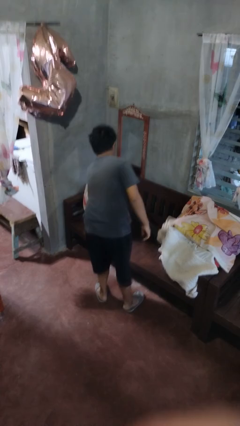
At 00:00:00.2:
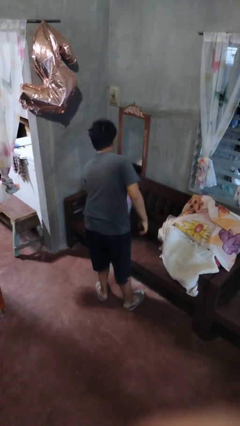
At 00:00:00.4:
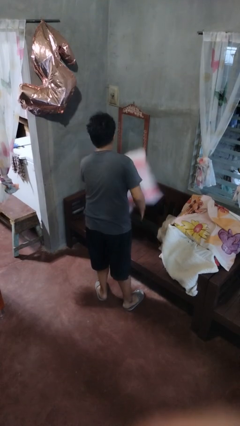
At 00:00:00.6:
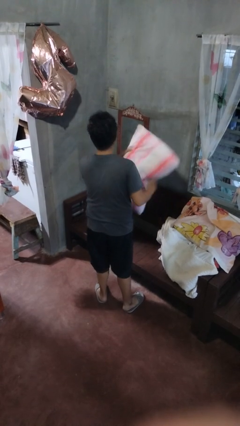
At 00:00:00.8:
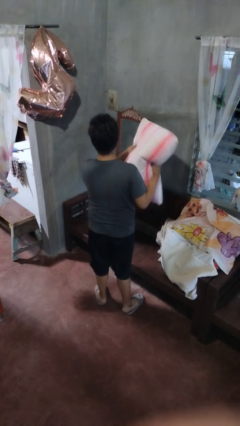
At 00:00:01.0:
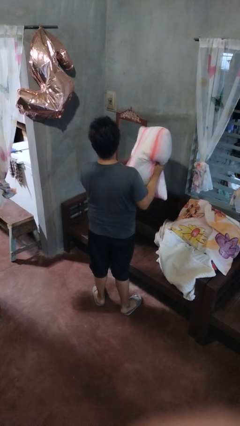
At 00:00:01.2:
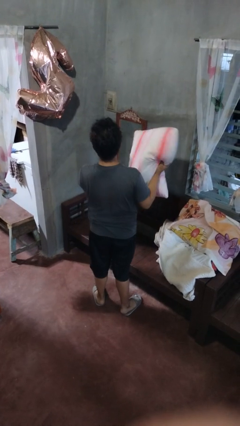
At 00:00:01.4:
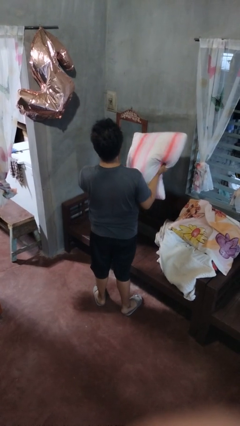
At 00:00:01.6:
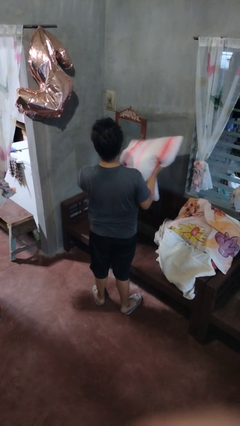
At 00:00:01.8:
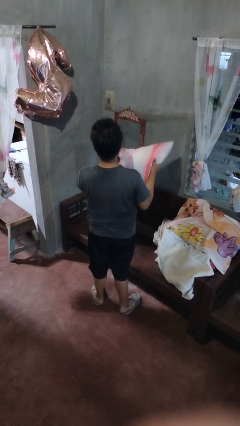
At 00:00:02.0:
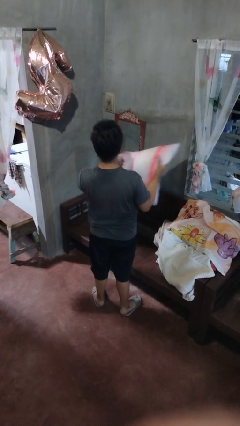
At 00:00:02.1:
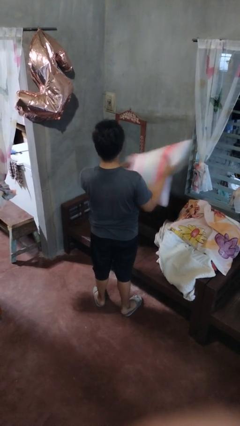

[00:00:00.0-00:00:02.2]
person picks up object from couch

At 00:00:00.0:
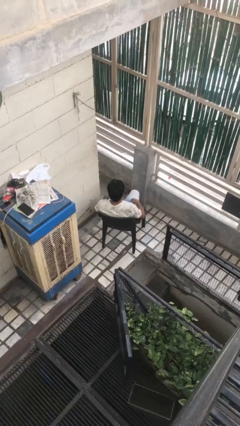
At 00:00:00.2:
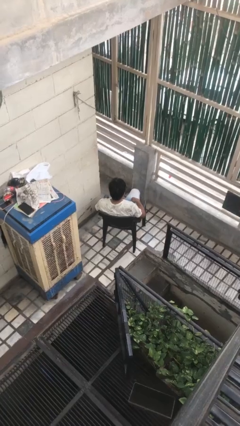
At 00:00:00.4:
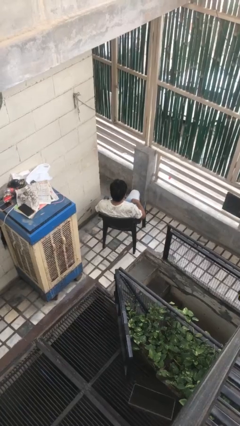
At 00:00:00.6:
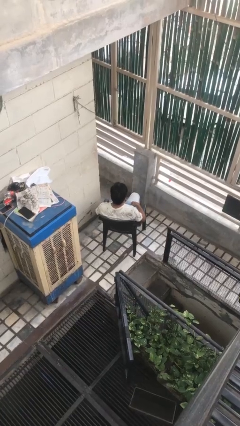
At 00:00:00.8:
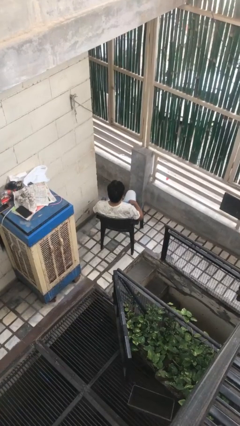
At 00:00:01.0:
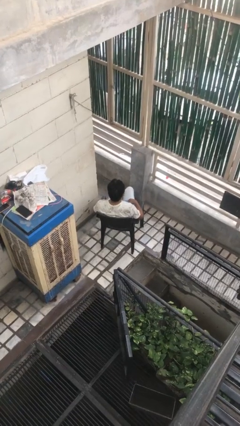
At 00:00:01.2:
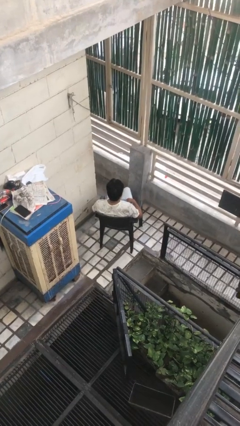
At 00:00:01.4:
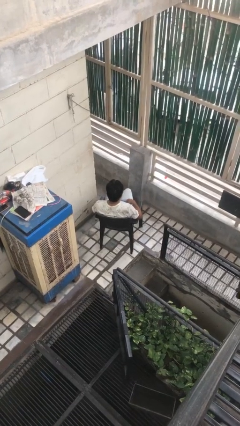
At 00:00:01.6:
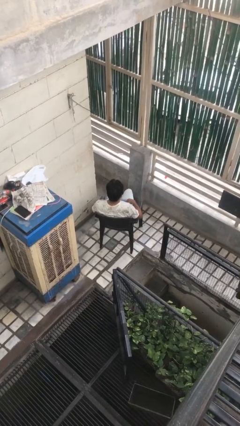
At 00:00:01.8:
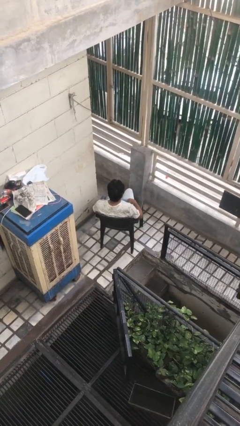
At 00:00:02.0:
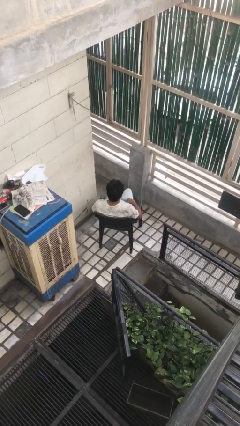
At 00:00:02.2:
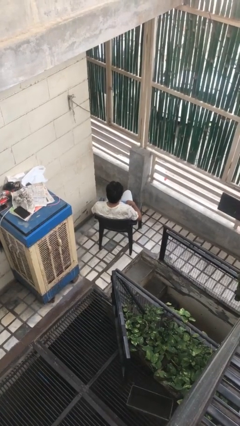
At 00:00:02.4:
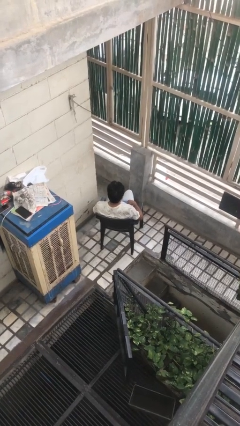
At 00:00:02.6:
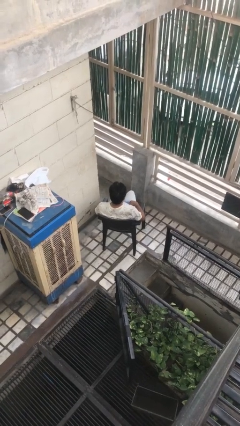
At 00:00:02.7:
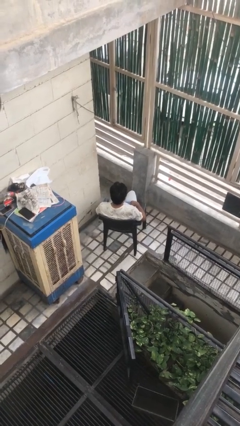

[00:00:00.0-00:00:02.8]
person crosses legs

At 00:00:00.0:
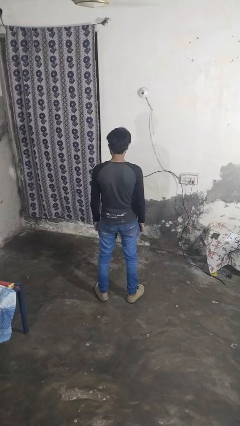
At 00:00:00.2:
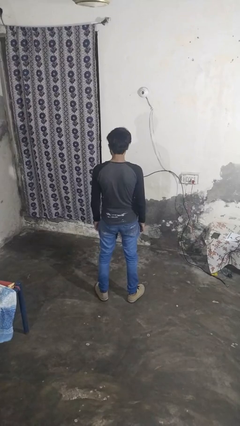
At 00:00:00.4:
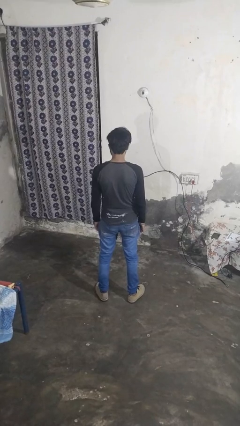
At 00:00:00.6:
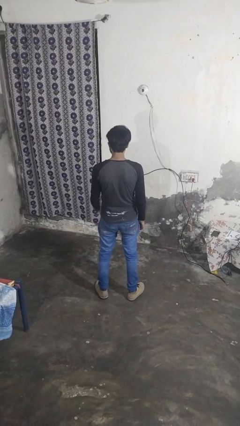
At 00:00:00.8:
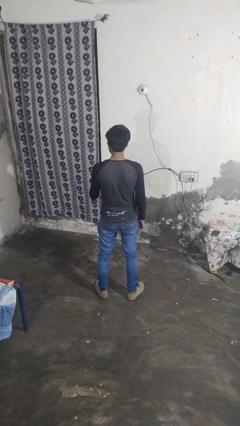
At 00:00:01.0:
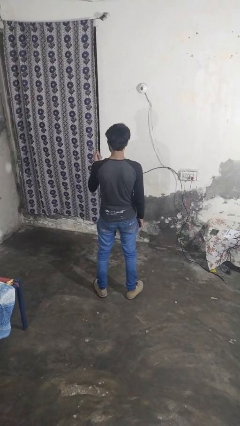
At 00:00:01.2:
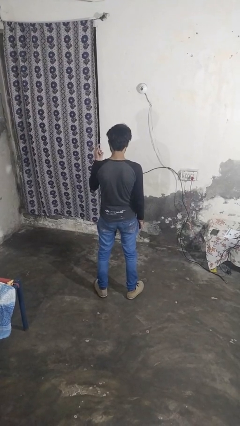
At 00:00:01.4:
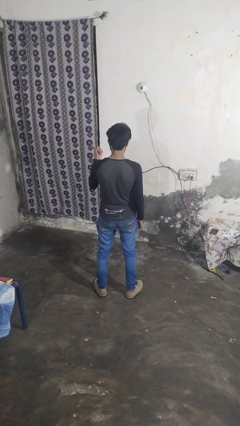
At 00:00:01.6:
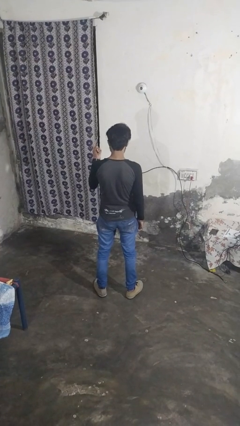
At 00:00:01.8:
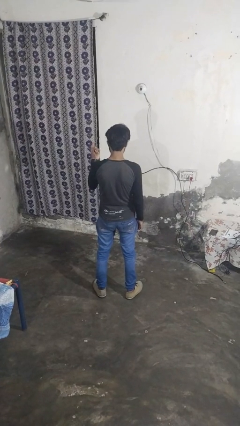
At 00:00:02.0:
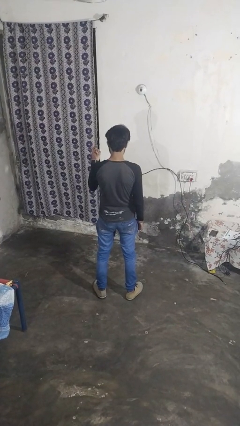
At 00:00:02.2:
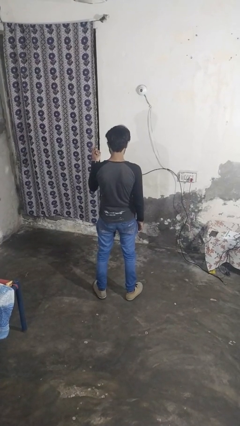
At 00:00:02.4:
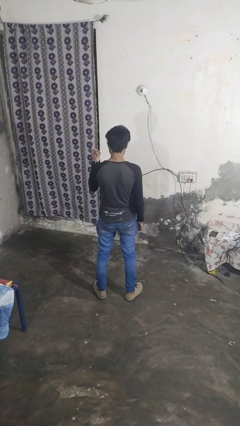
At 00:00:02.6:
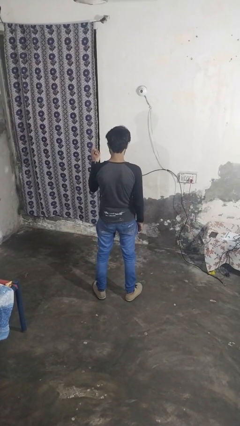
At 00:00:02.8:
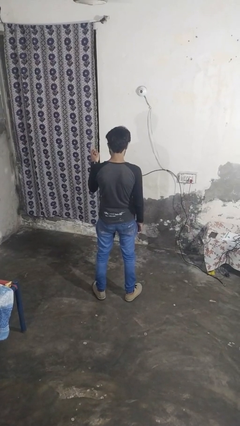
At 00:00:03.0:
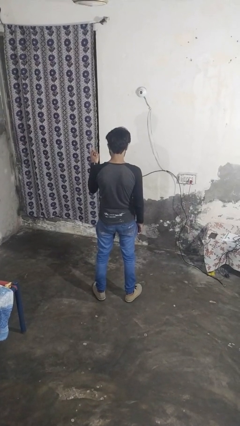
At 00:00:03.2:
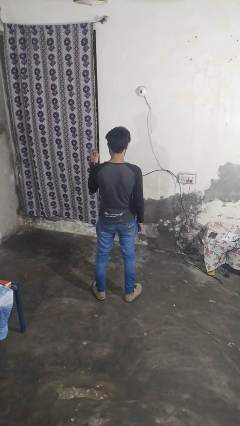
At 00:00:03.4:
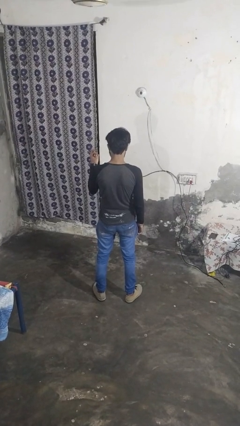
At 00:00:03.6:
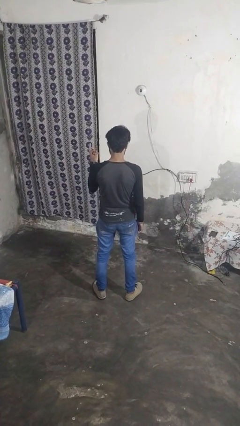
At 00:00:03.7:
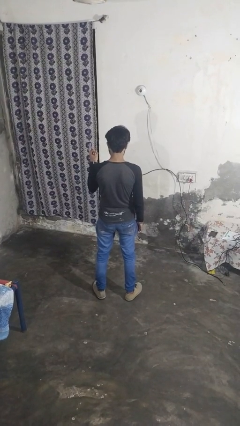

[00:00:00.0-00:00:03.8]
person gestures come here

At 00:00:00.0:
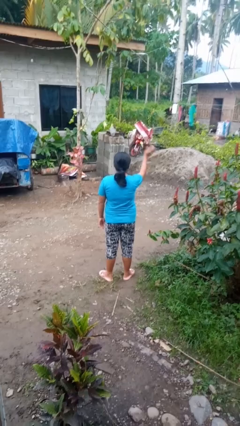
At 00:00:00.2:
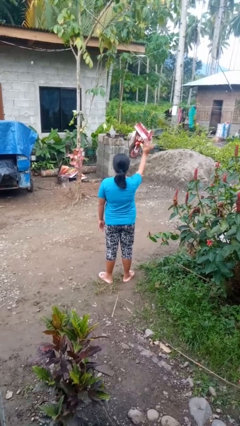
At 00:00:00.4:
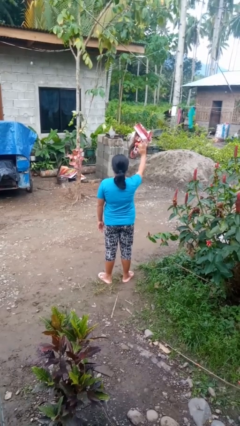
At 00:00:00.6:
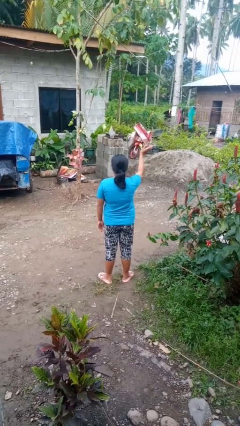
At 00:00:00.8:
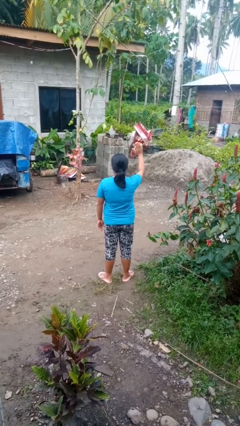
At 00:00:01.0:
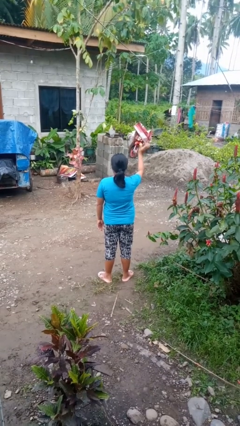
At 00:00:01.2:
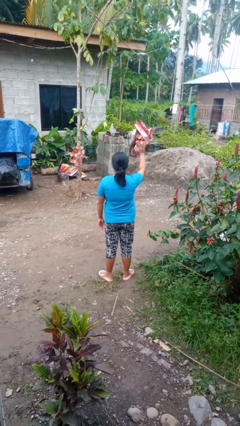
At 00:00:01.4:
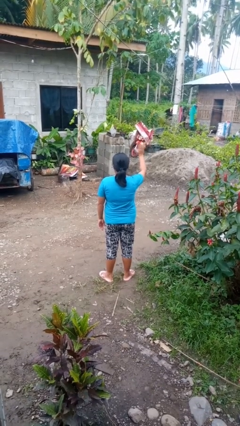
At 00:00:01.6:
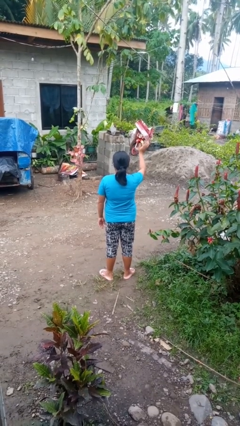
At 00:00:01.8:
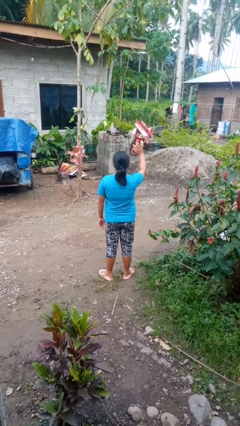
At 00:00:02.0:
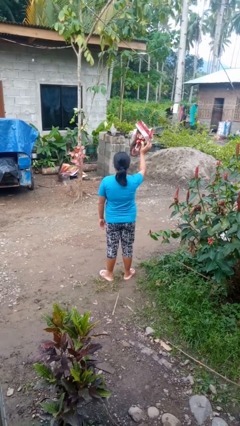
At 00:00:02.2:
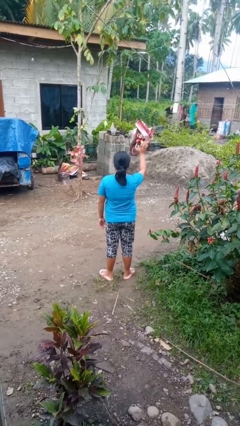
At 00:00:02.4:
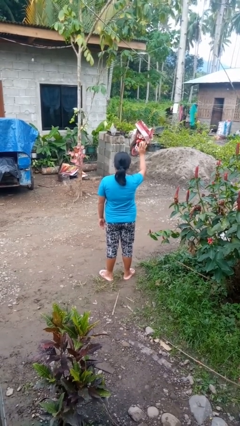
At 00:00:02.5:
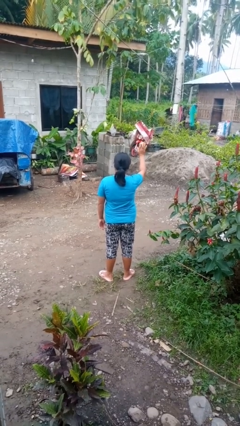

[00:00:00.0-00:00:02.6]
person waves at person

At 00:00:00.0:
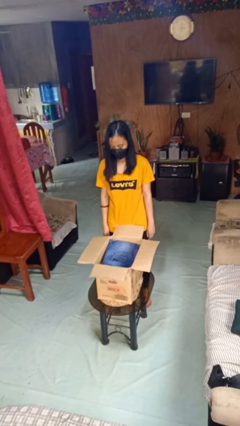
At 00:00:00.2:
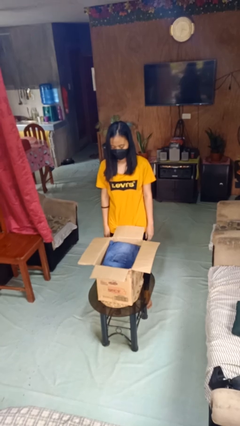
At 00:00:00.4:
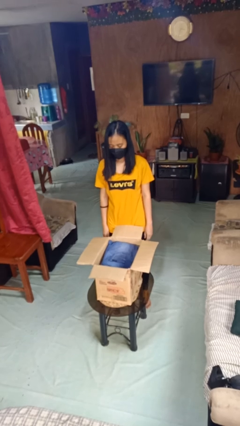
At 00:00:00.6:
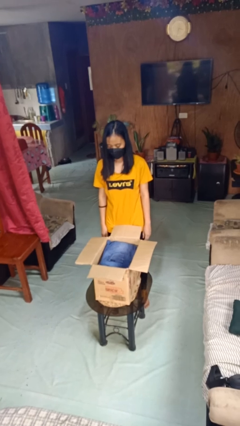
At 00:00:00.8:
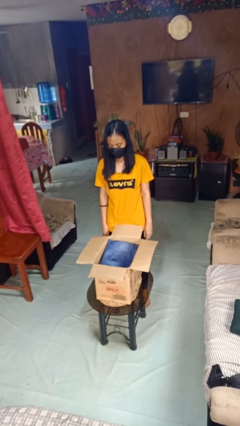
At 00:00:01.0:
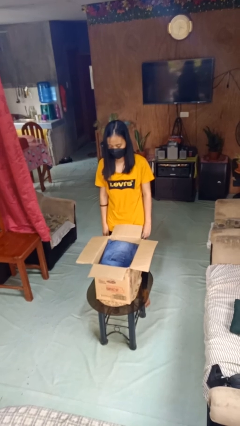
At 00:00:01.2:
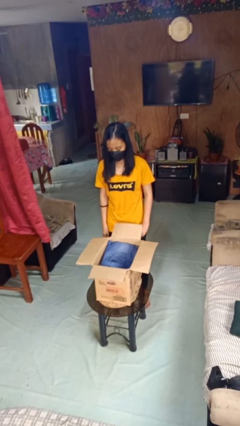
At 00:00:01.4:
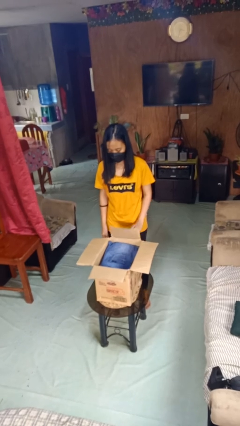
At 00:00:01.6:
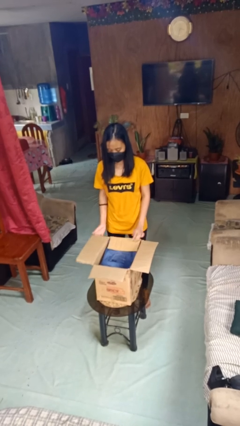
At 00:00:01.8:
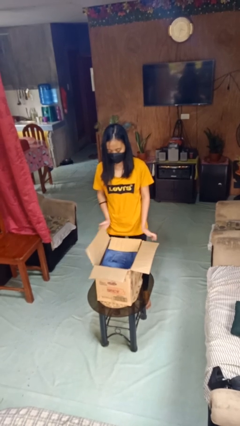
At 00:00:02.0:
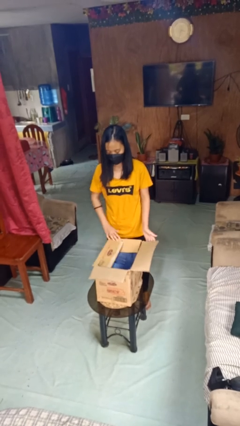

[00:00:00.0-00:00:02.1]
person closes box

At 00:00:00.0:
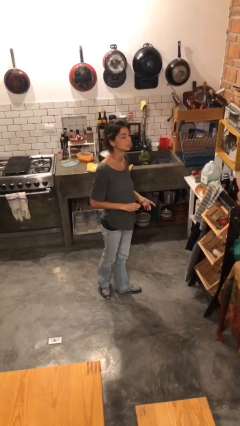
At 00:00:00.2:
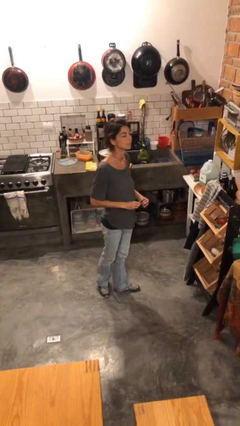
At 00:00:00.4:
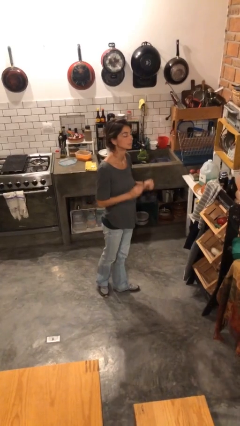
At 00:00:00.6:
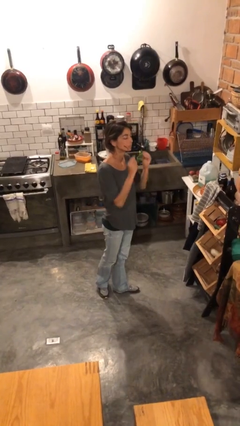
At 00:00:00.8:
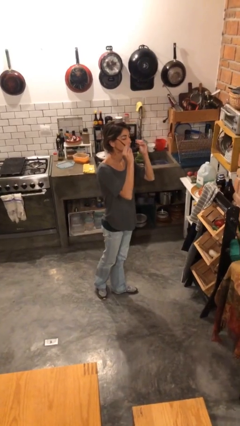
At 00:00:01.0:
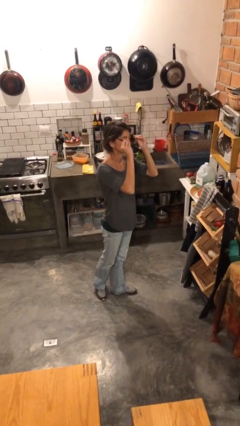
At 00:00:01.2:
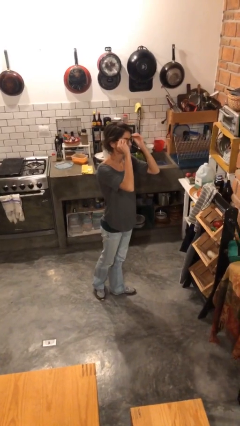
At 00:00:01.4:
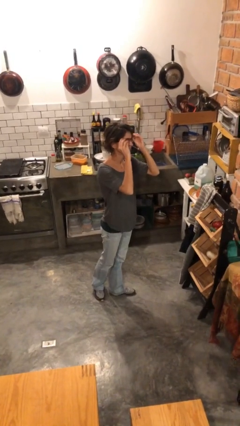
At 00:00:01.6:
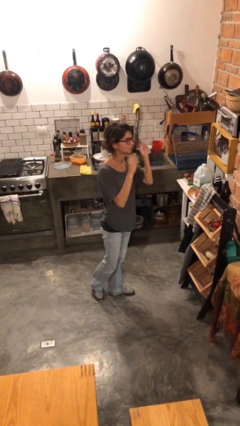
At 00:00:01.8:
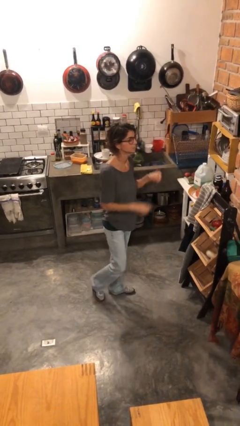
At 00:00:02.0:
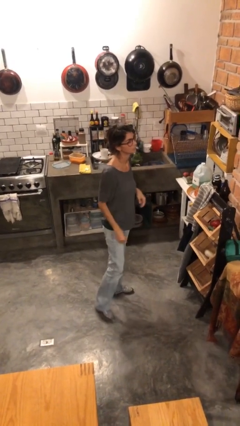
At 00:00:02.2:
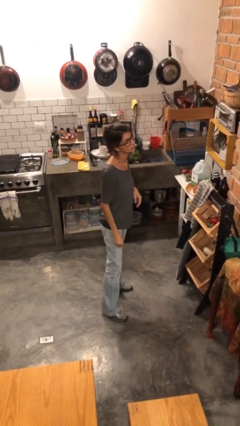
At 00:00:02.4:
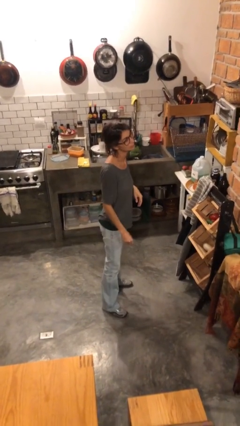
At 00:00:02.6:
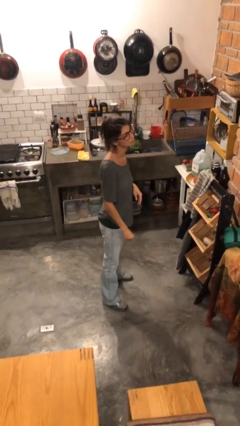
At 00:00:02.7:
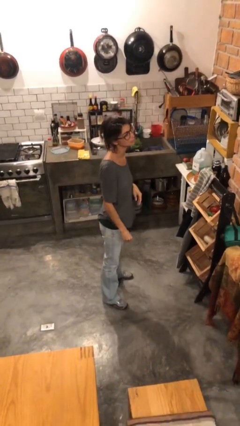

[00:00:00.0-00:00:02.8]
person puts on glasses

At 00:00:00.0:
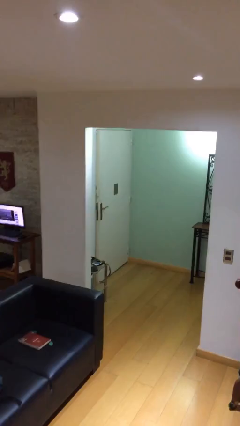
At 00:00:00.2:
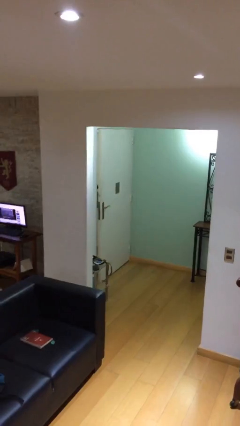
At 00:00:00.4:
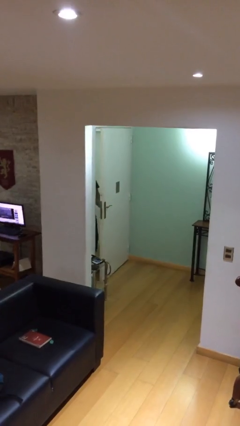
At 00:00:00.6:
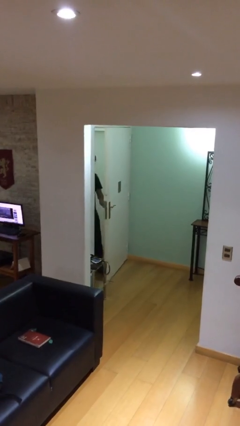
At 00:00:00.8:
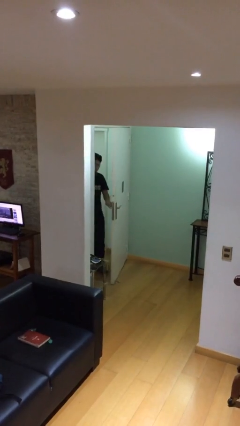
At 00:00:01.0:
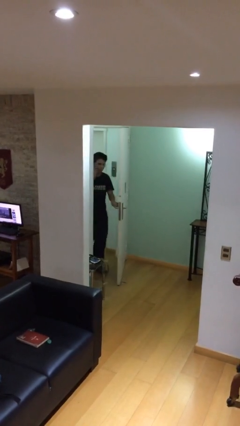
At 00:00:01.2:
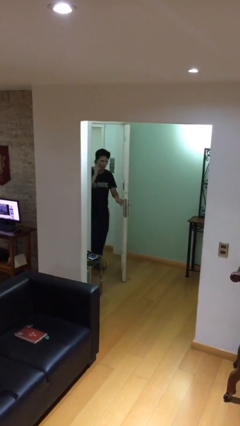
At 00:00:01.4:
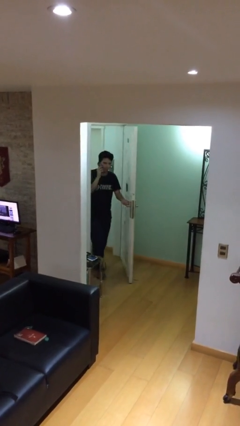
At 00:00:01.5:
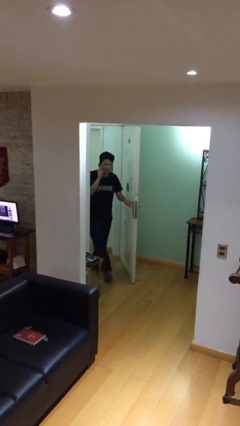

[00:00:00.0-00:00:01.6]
person opens facility door
